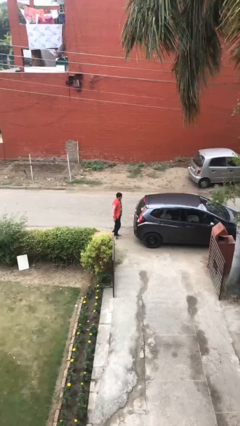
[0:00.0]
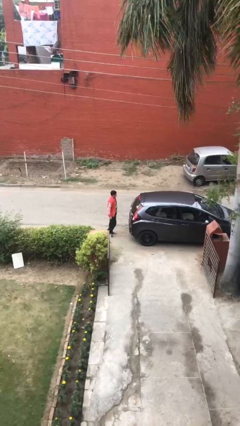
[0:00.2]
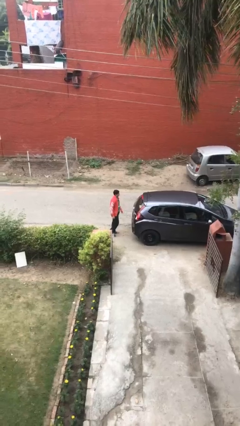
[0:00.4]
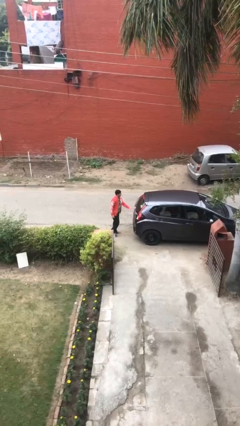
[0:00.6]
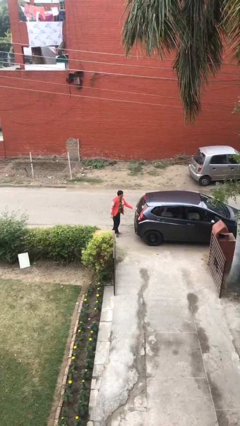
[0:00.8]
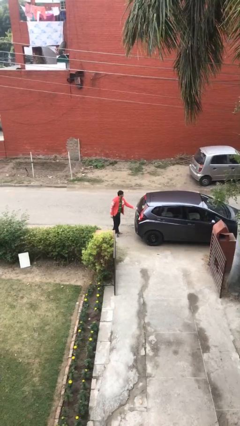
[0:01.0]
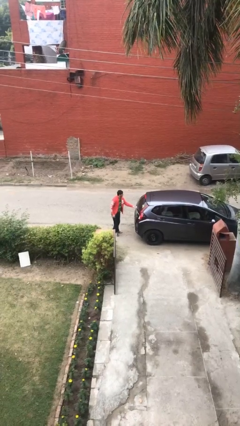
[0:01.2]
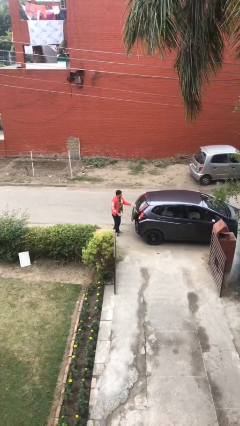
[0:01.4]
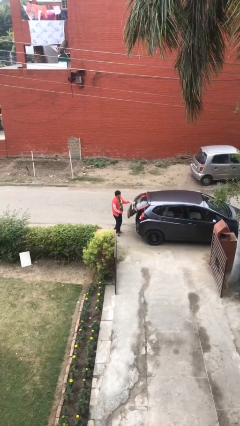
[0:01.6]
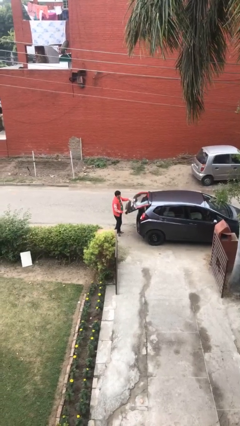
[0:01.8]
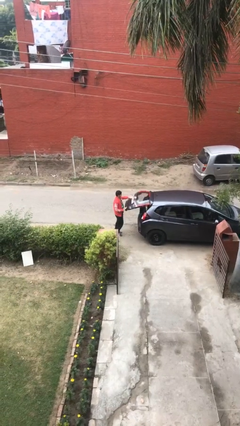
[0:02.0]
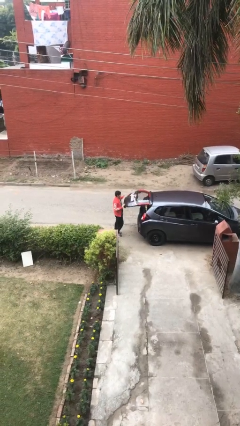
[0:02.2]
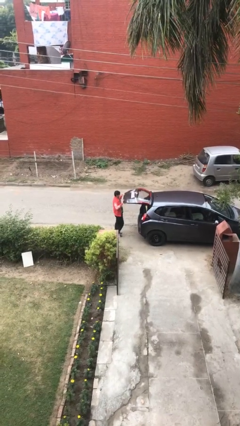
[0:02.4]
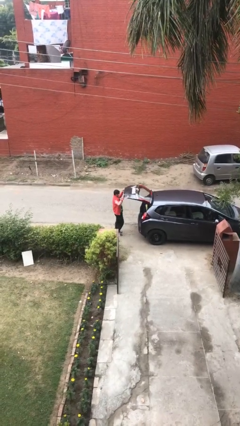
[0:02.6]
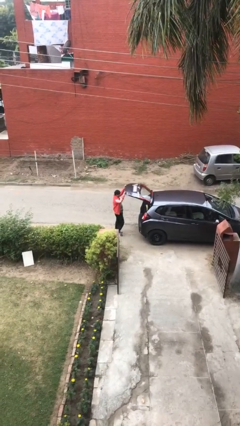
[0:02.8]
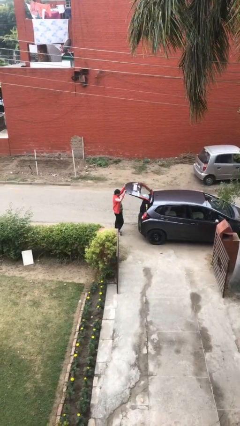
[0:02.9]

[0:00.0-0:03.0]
person opens car trunk

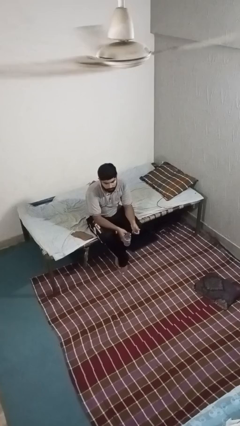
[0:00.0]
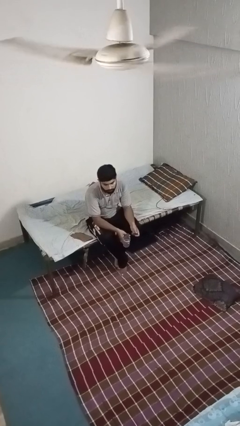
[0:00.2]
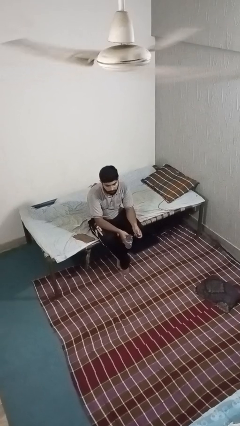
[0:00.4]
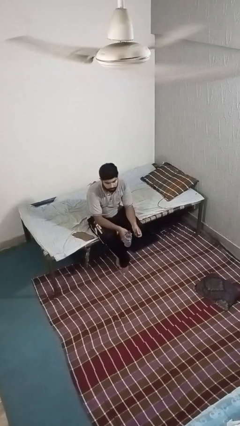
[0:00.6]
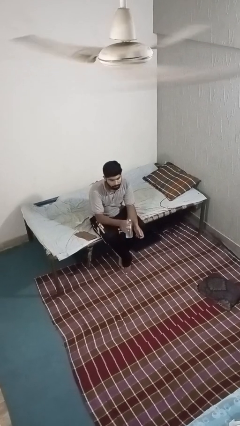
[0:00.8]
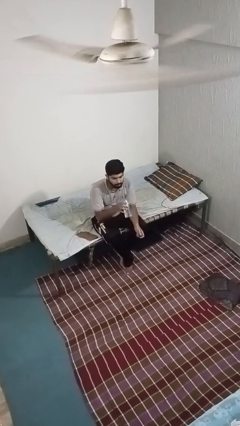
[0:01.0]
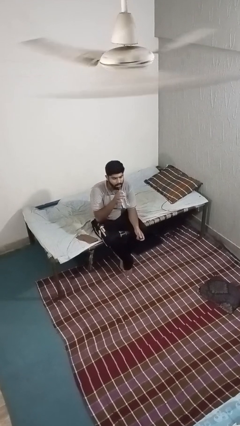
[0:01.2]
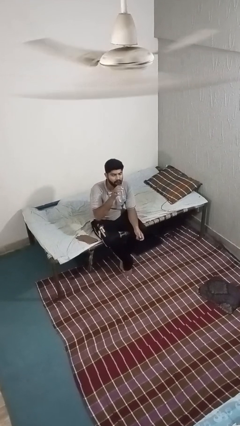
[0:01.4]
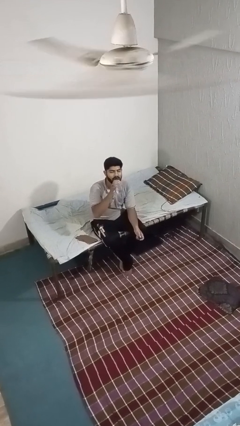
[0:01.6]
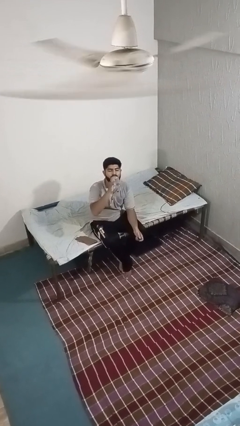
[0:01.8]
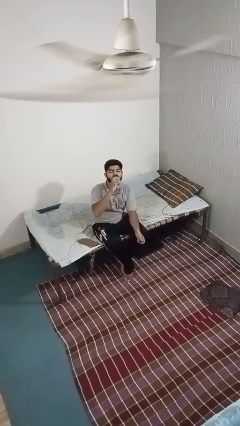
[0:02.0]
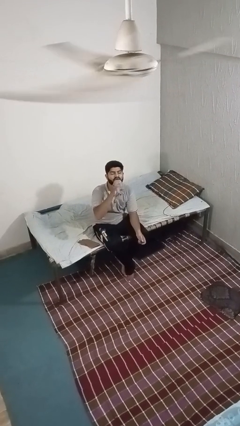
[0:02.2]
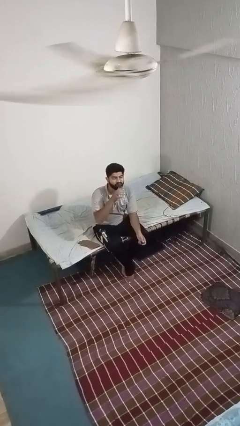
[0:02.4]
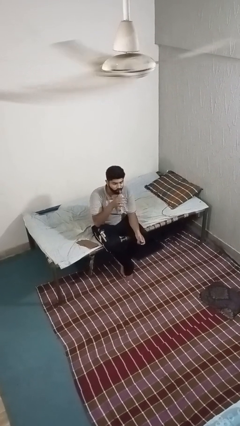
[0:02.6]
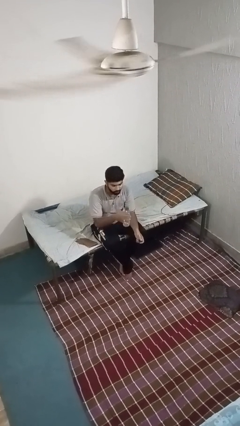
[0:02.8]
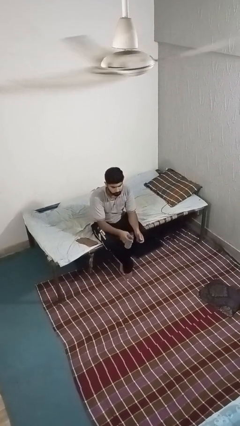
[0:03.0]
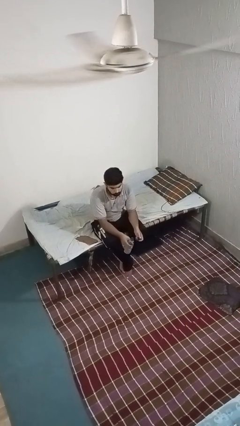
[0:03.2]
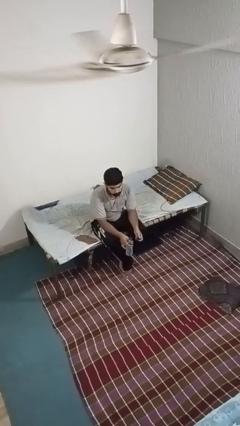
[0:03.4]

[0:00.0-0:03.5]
person drinks from bottle

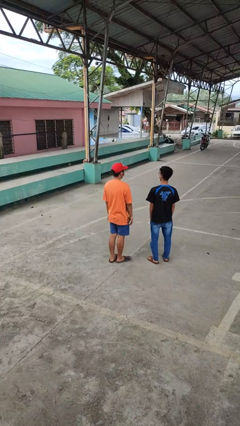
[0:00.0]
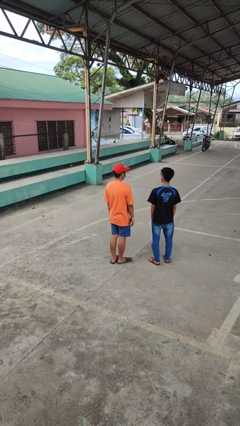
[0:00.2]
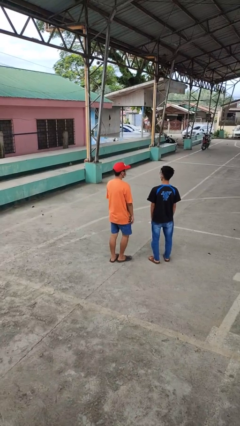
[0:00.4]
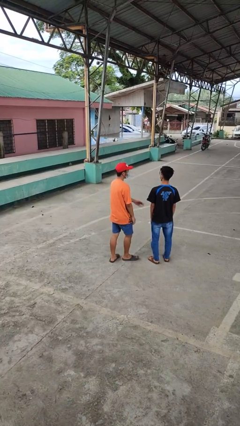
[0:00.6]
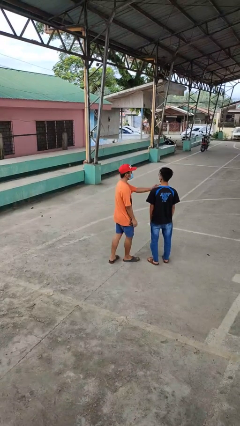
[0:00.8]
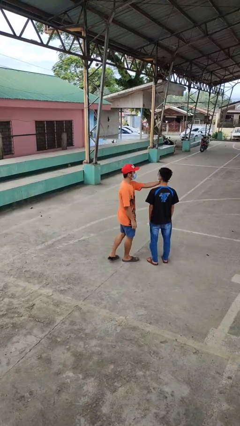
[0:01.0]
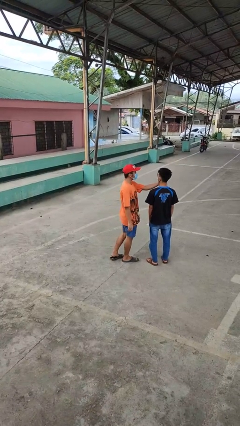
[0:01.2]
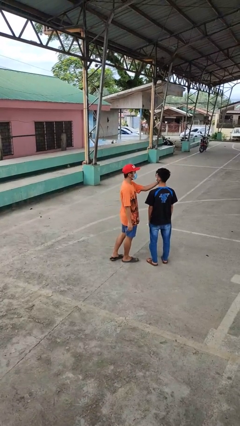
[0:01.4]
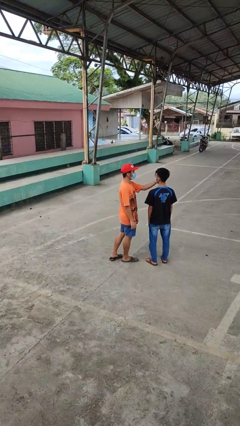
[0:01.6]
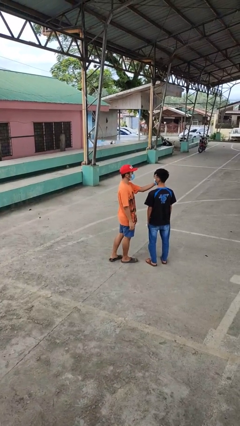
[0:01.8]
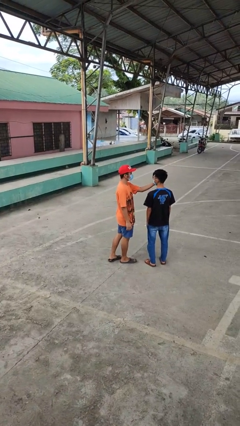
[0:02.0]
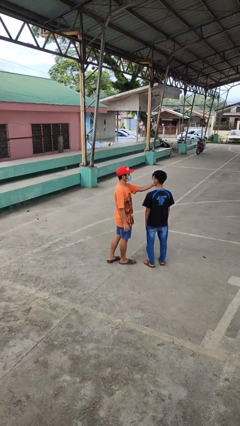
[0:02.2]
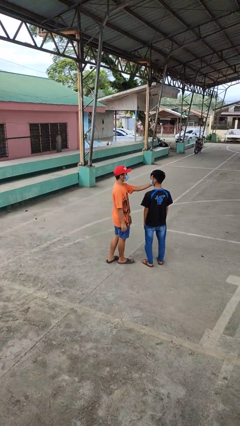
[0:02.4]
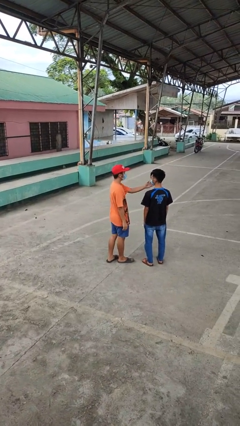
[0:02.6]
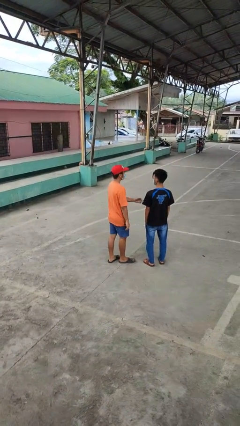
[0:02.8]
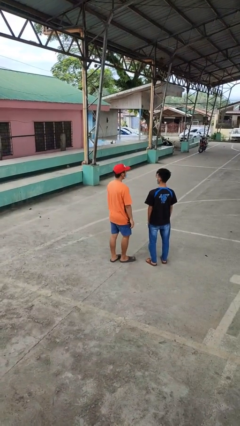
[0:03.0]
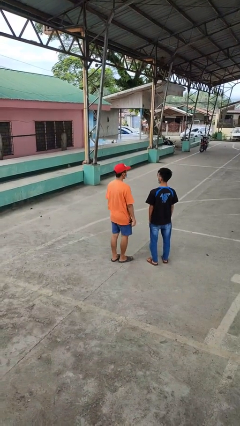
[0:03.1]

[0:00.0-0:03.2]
person touches face of person

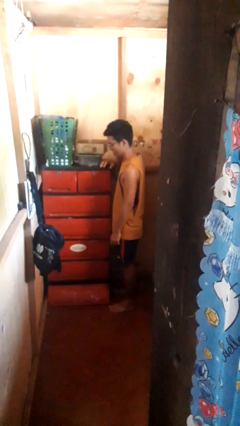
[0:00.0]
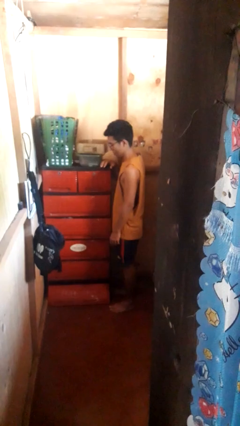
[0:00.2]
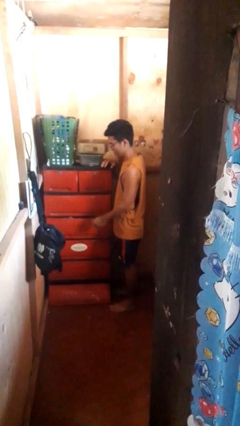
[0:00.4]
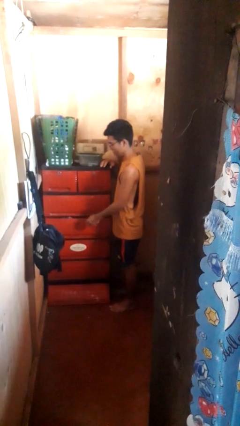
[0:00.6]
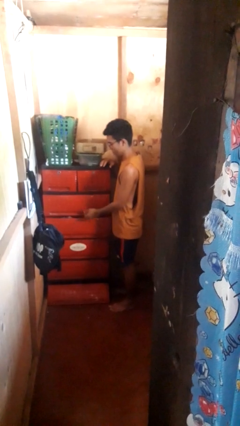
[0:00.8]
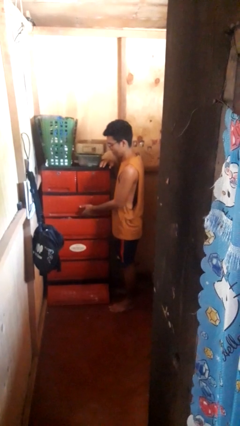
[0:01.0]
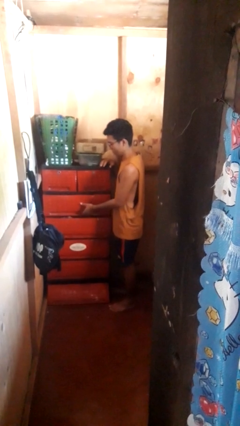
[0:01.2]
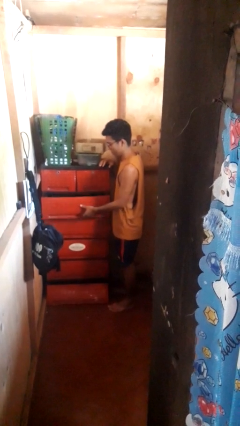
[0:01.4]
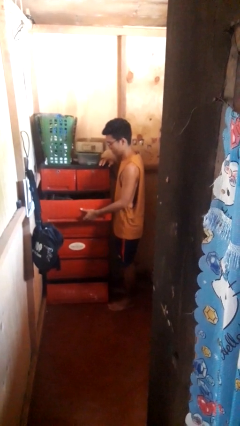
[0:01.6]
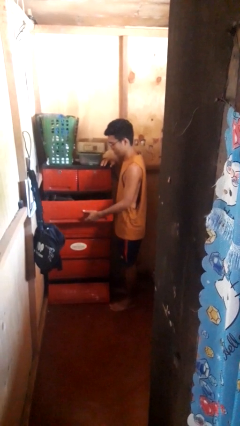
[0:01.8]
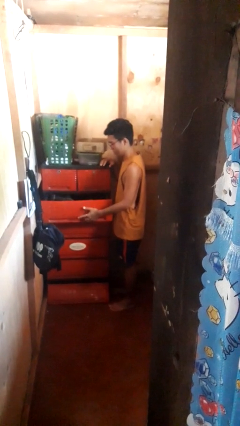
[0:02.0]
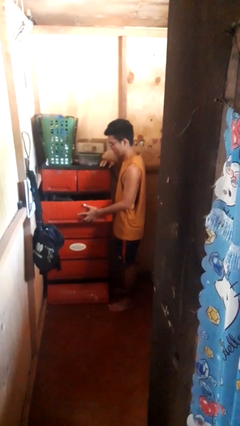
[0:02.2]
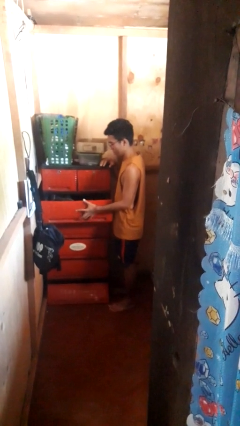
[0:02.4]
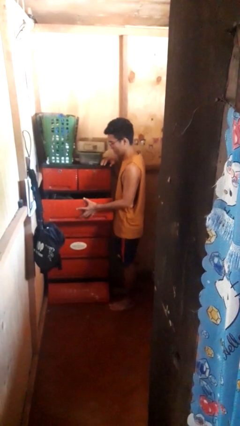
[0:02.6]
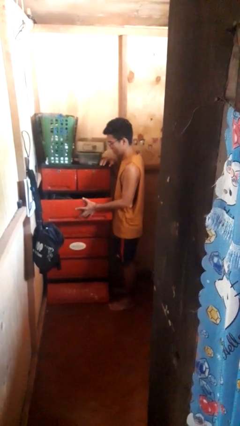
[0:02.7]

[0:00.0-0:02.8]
person opens dresser drawer

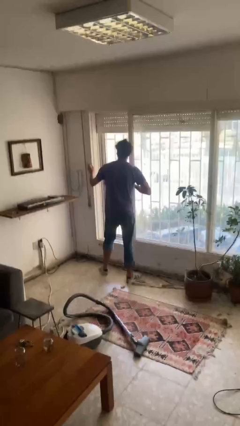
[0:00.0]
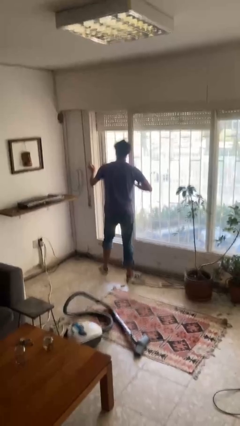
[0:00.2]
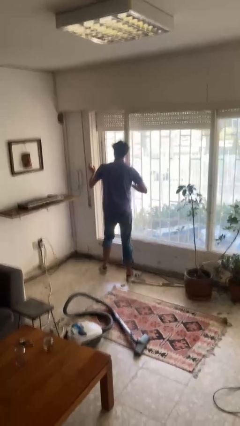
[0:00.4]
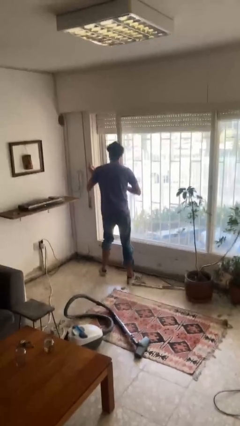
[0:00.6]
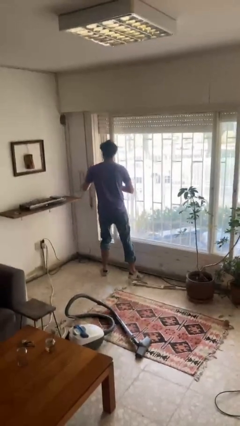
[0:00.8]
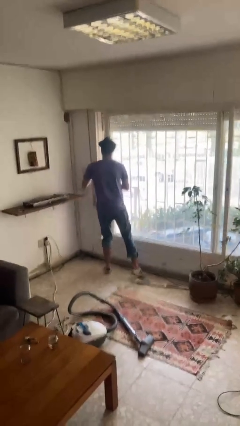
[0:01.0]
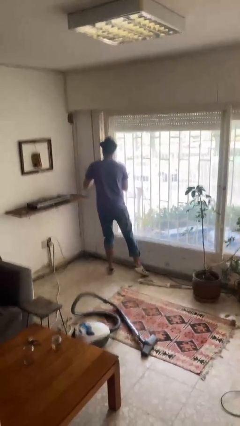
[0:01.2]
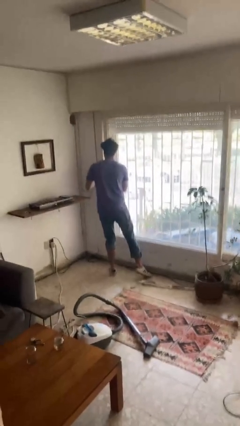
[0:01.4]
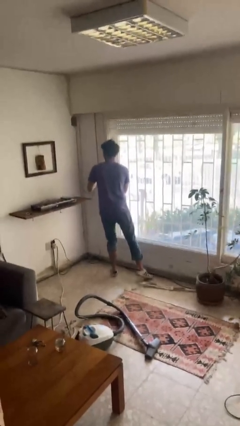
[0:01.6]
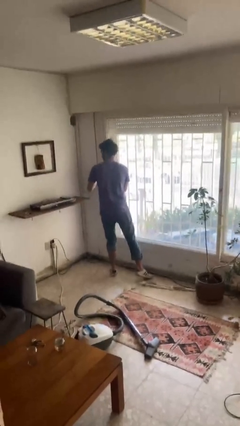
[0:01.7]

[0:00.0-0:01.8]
person closes sliding door

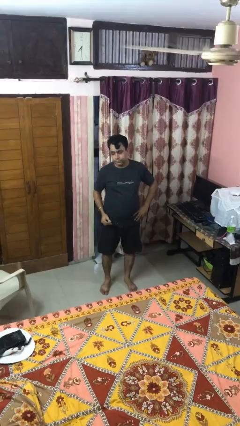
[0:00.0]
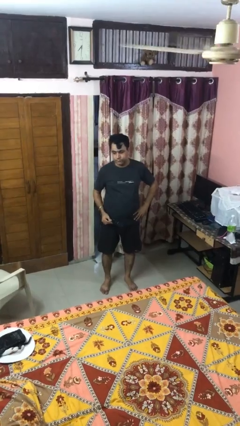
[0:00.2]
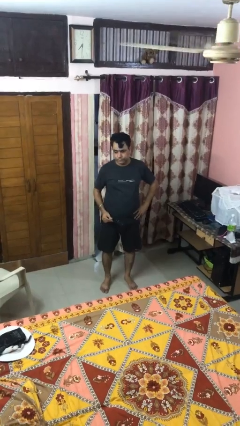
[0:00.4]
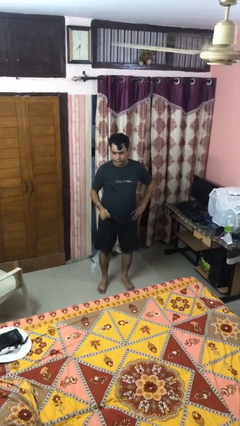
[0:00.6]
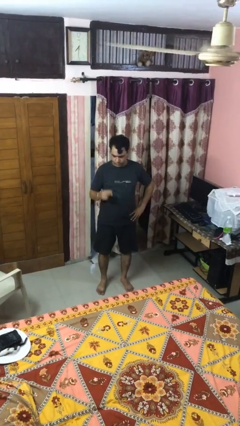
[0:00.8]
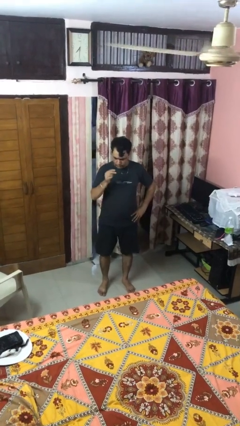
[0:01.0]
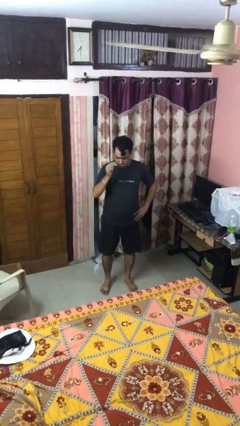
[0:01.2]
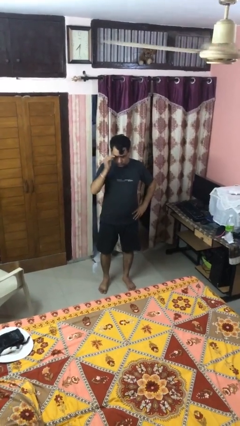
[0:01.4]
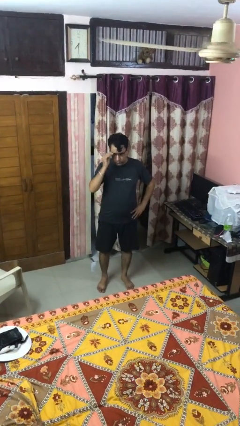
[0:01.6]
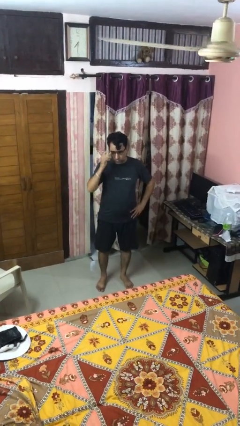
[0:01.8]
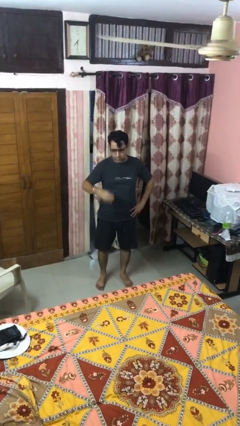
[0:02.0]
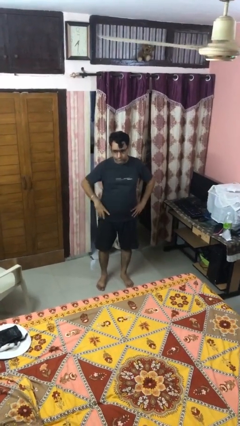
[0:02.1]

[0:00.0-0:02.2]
person puts on glasses

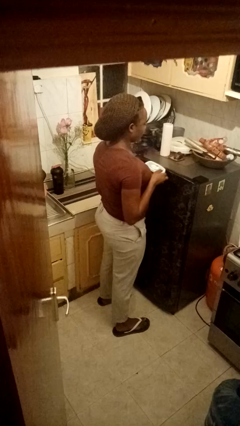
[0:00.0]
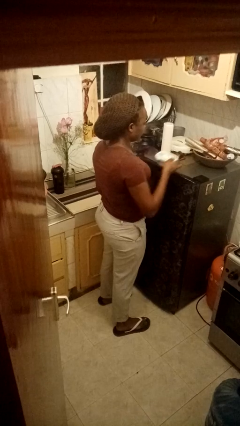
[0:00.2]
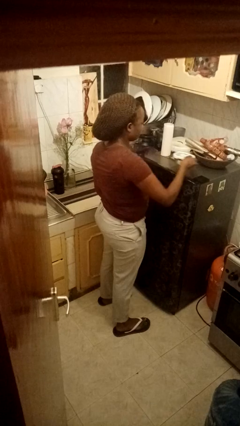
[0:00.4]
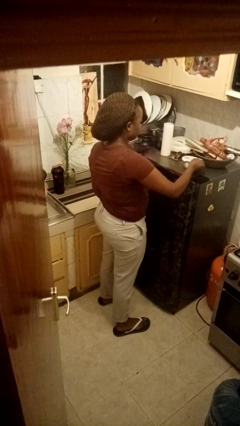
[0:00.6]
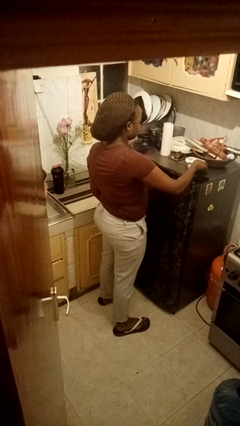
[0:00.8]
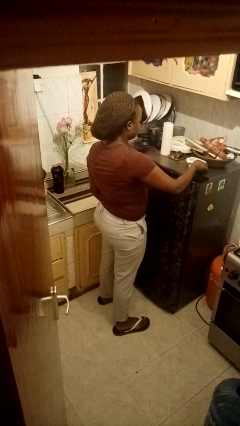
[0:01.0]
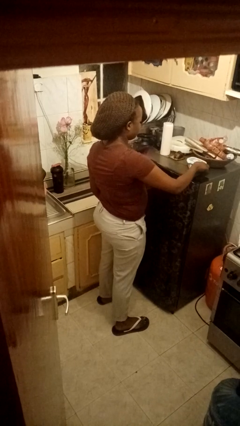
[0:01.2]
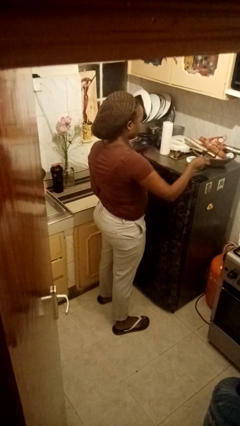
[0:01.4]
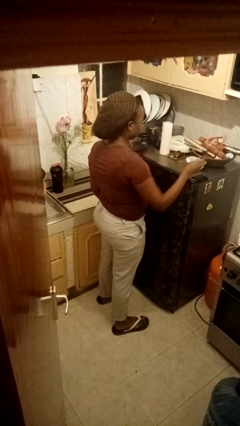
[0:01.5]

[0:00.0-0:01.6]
person puts down object on countertop
